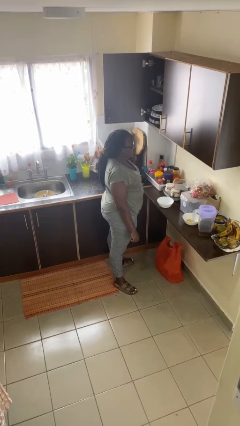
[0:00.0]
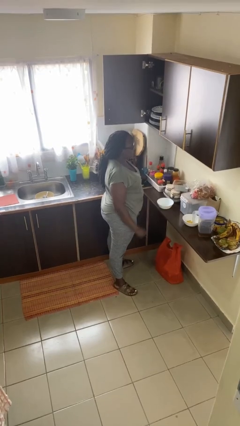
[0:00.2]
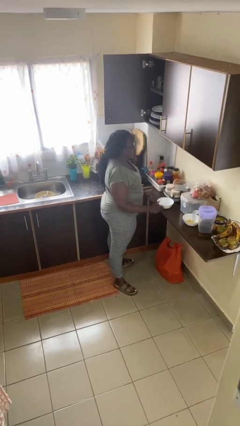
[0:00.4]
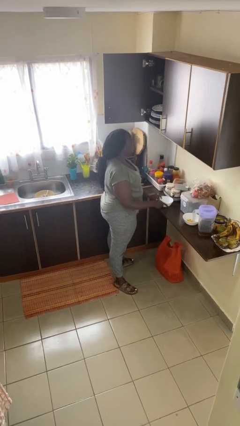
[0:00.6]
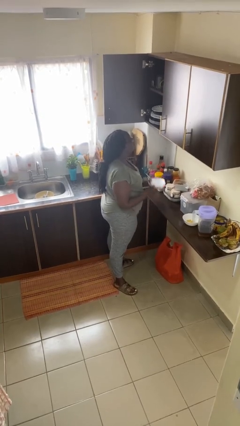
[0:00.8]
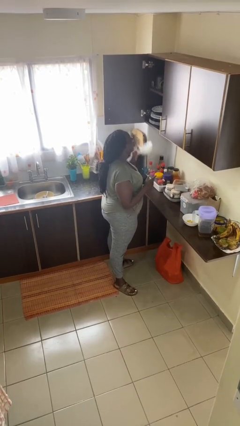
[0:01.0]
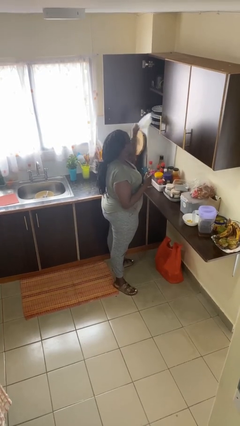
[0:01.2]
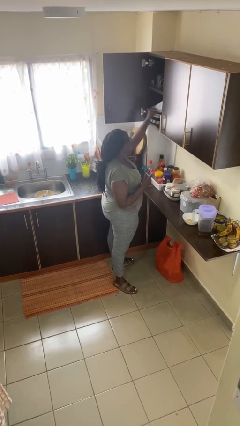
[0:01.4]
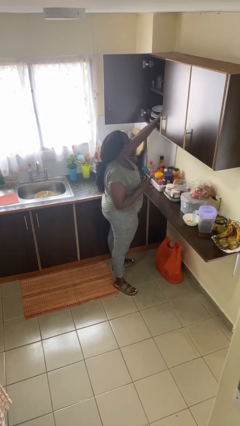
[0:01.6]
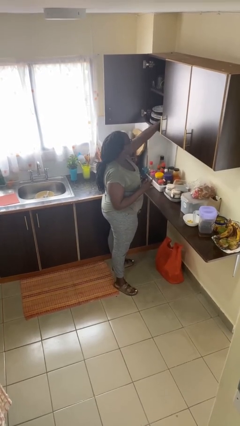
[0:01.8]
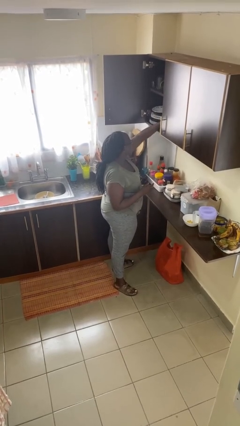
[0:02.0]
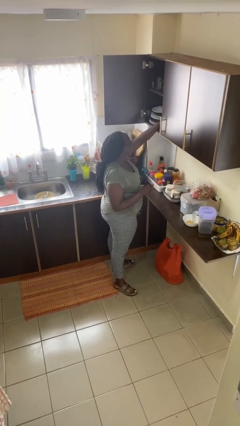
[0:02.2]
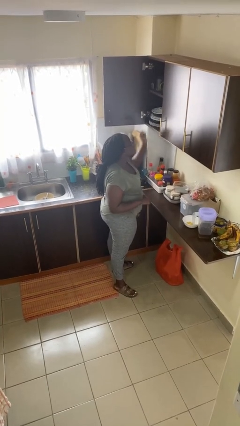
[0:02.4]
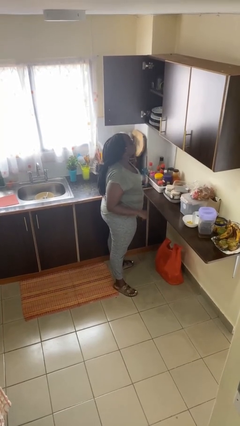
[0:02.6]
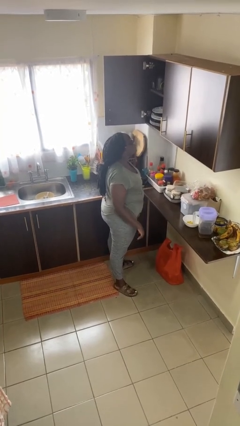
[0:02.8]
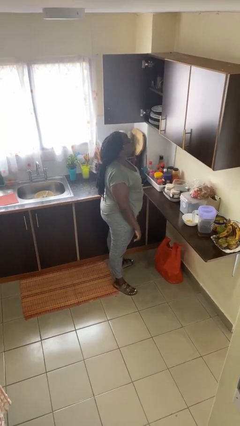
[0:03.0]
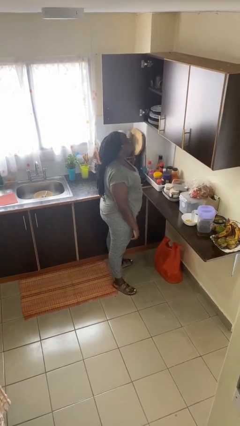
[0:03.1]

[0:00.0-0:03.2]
person puts object in cabinet

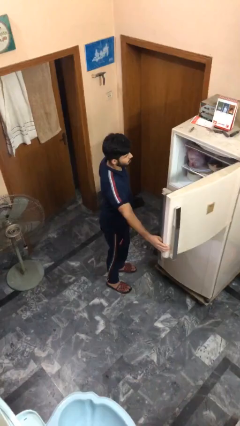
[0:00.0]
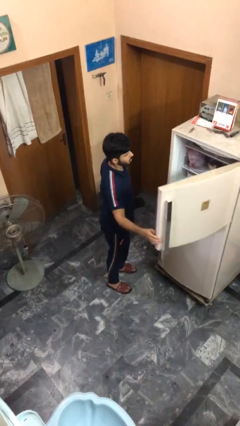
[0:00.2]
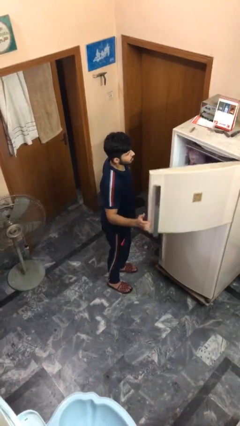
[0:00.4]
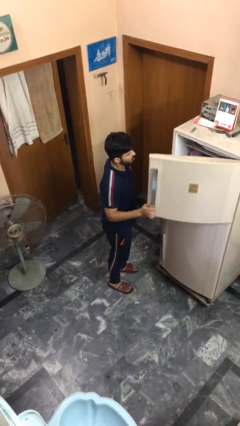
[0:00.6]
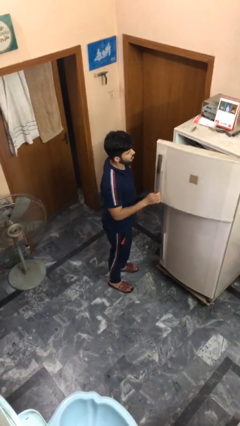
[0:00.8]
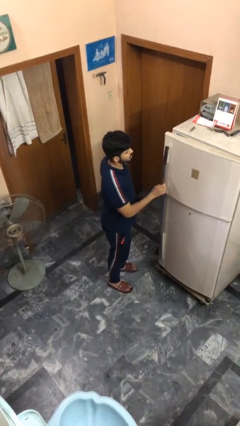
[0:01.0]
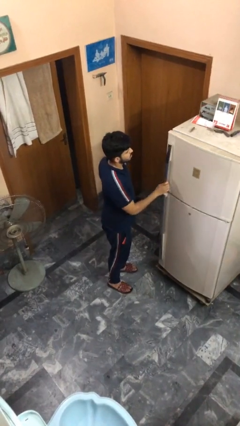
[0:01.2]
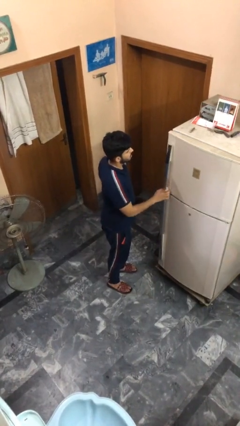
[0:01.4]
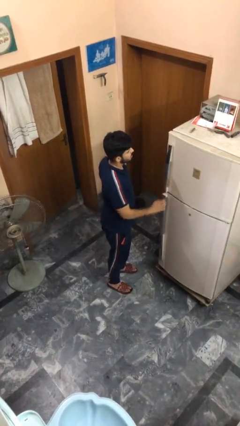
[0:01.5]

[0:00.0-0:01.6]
person closes refrigerator

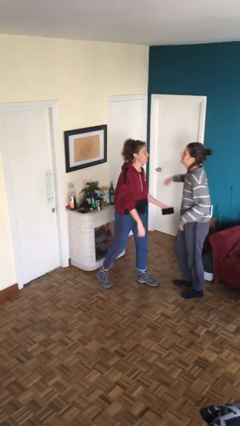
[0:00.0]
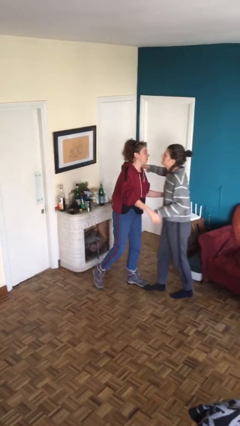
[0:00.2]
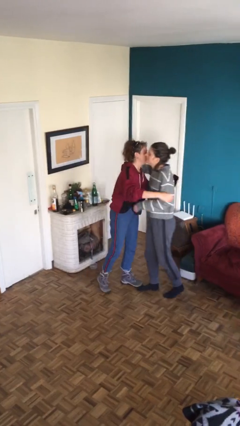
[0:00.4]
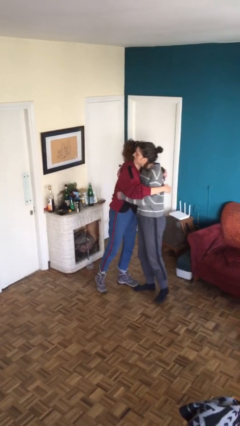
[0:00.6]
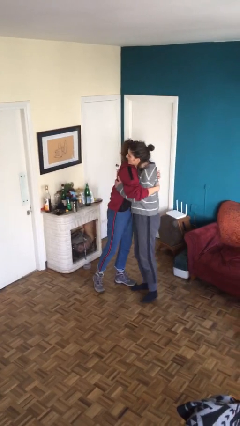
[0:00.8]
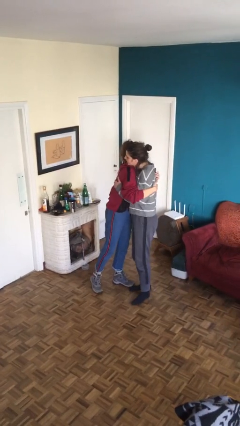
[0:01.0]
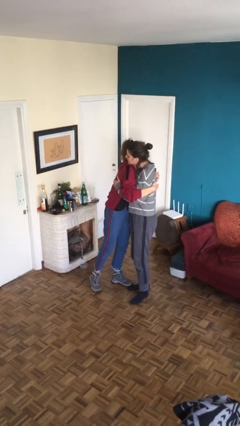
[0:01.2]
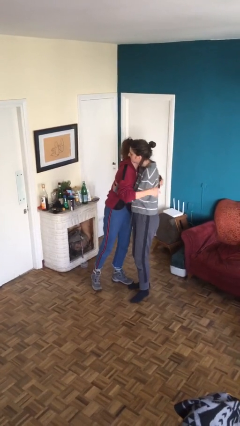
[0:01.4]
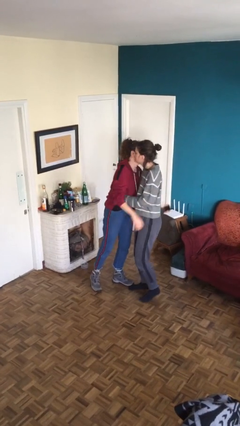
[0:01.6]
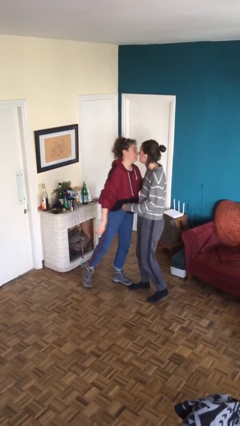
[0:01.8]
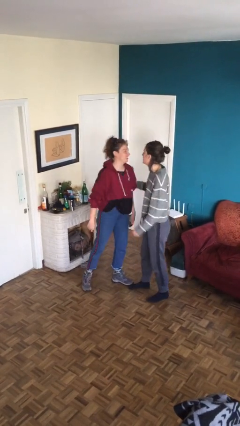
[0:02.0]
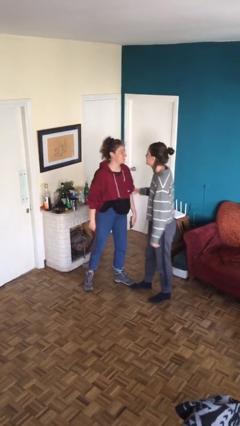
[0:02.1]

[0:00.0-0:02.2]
person embraces person

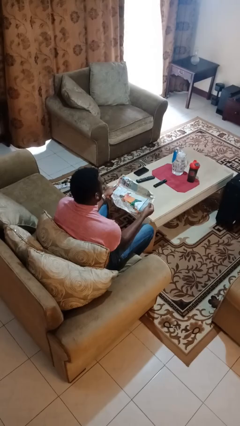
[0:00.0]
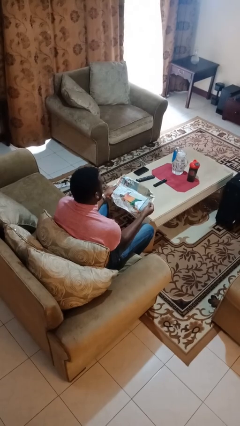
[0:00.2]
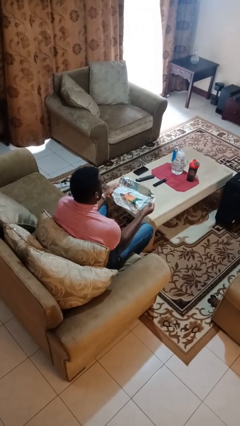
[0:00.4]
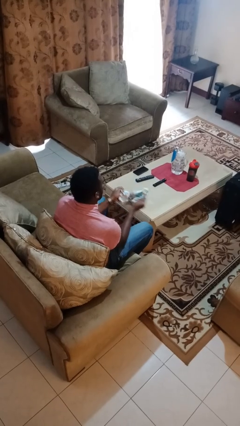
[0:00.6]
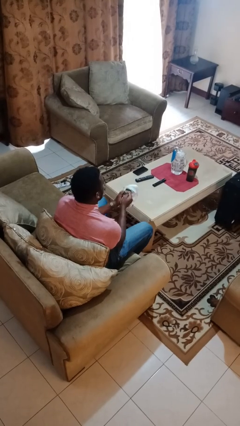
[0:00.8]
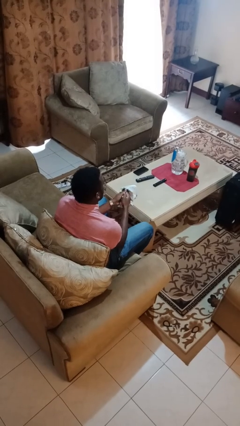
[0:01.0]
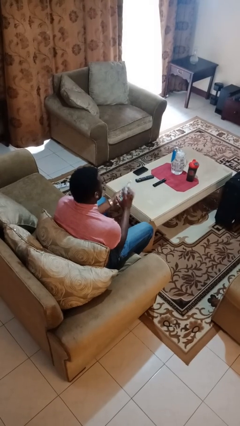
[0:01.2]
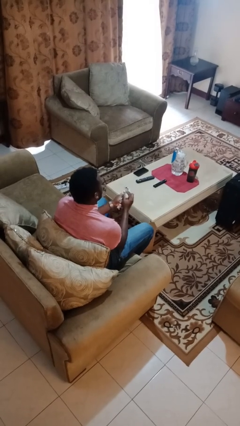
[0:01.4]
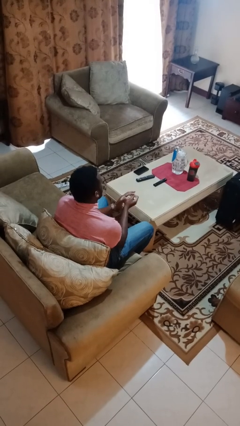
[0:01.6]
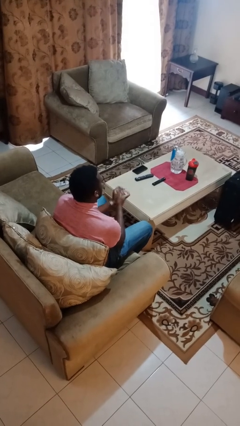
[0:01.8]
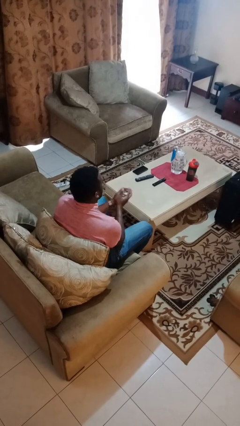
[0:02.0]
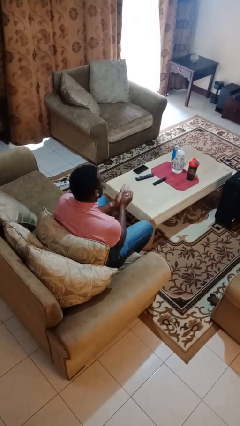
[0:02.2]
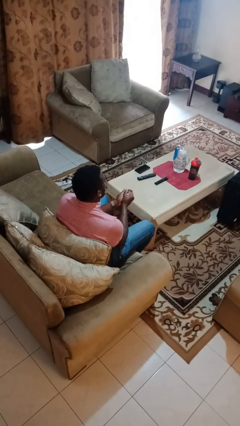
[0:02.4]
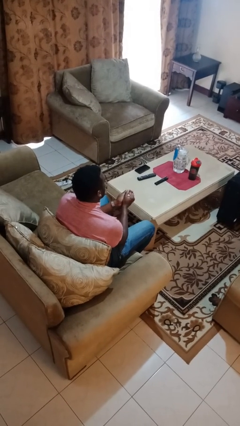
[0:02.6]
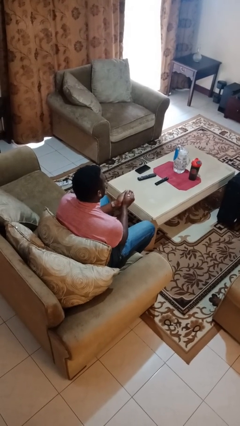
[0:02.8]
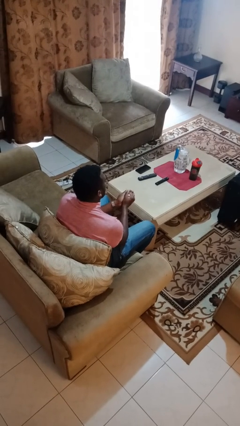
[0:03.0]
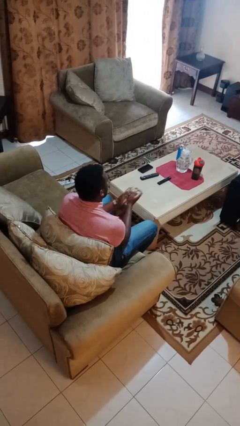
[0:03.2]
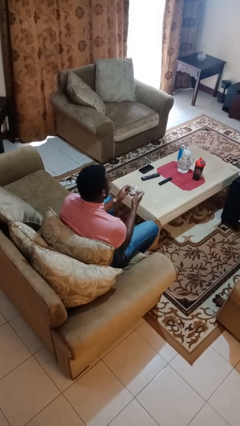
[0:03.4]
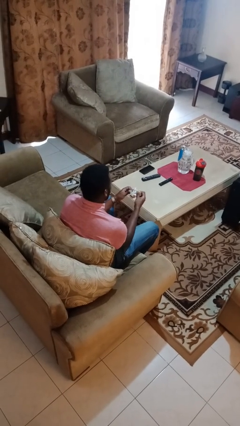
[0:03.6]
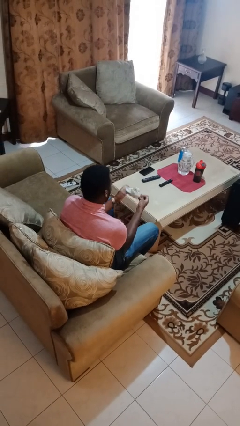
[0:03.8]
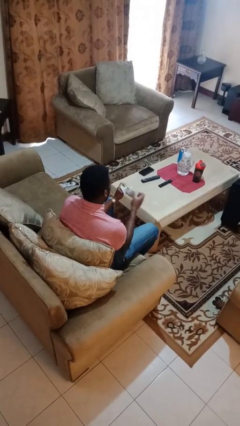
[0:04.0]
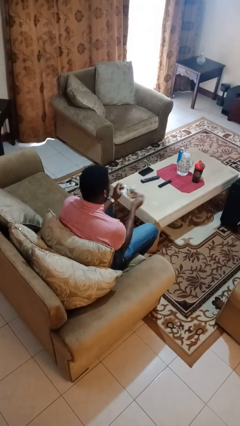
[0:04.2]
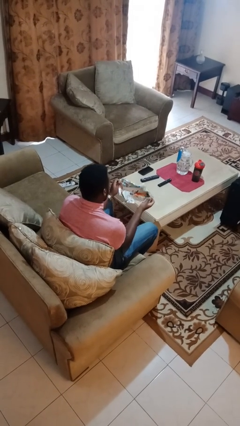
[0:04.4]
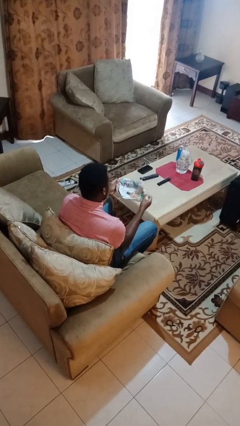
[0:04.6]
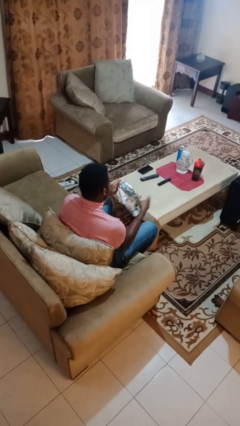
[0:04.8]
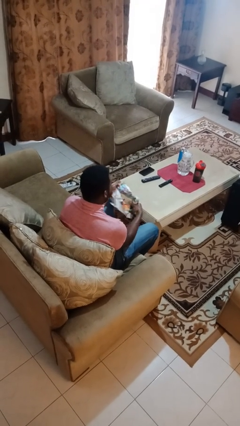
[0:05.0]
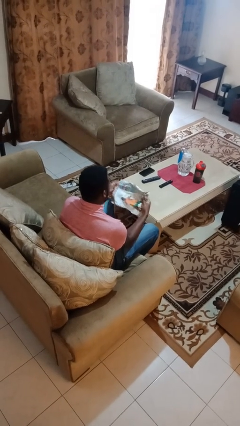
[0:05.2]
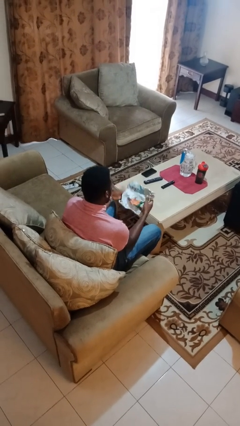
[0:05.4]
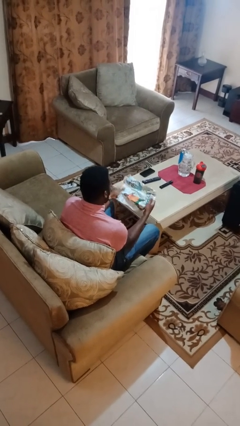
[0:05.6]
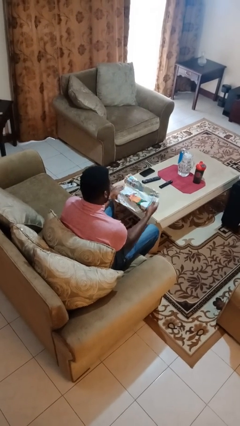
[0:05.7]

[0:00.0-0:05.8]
person crumples paper

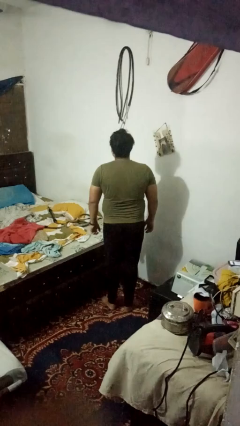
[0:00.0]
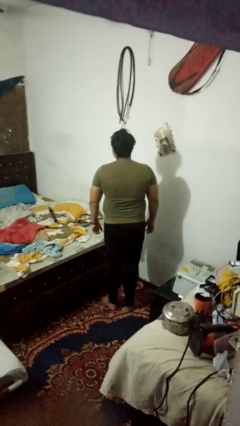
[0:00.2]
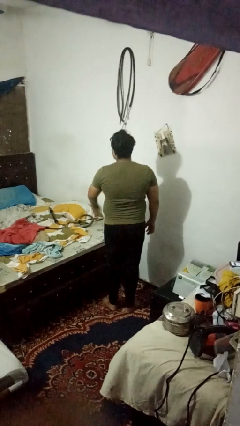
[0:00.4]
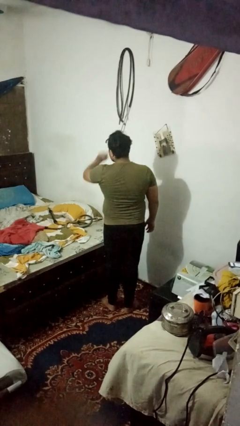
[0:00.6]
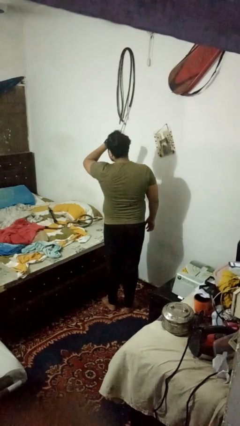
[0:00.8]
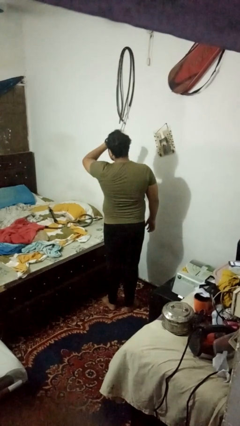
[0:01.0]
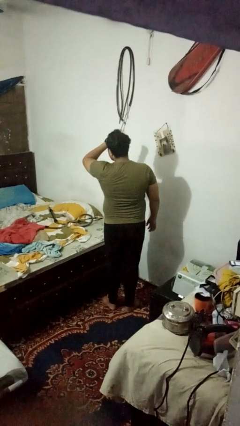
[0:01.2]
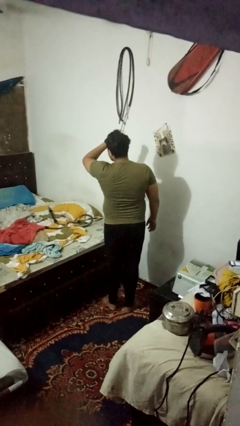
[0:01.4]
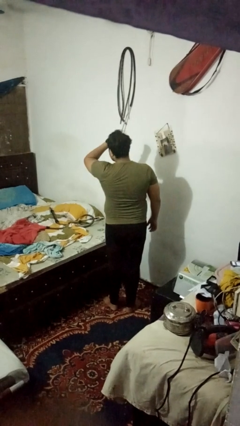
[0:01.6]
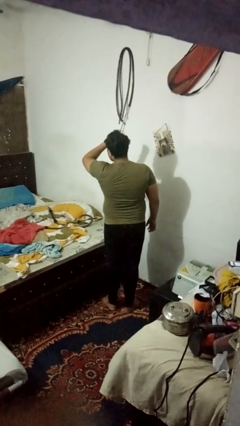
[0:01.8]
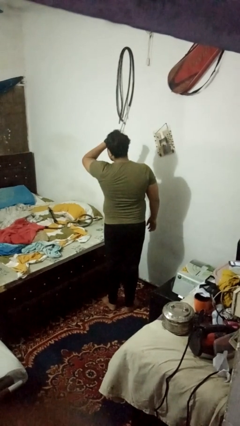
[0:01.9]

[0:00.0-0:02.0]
person gestures watch closely

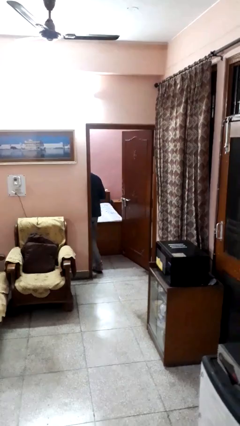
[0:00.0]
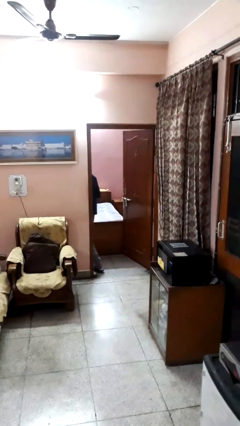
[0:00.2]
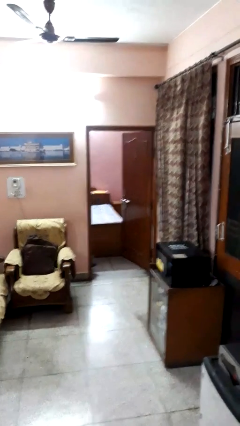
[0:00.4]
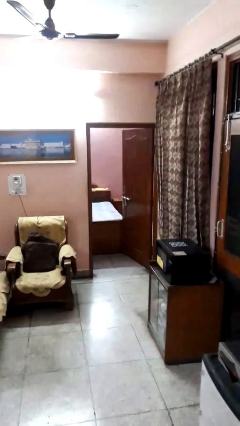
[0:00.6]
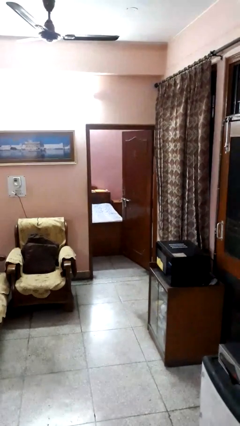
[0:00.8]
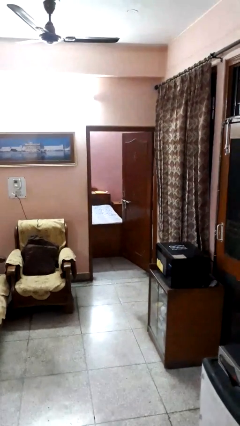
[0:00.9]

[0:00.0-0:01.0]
person exits scene through structure

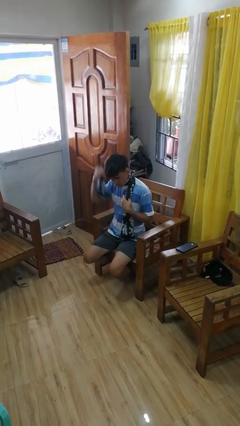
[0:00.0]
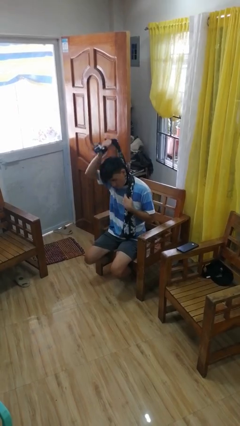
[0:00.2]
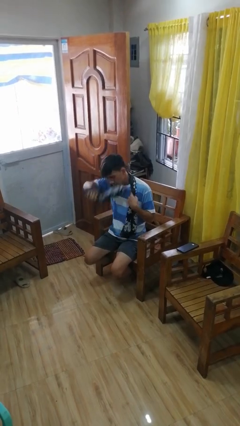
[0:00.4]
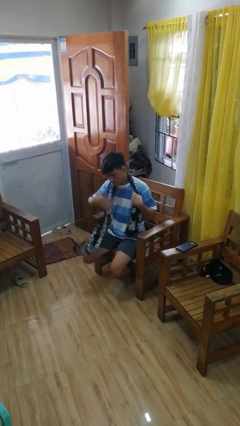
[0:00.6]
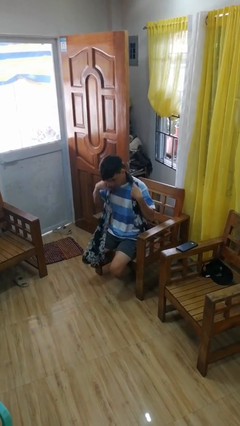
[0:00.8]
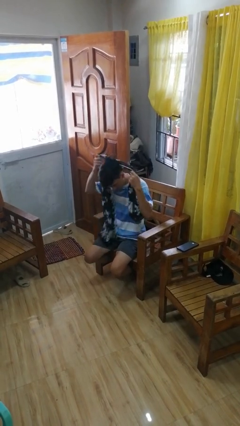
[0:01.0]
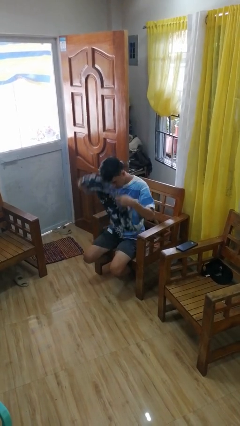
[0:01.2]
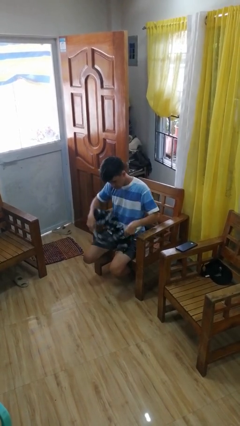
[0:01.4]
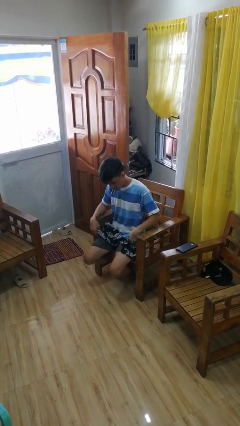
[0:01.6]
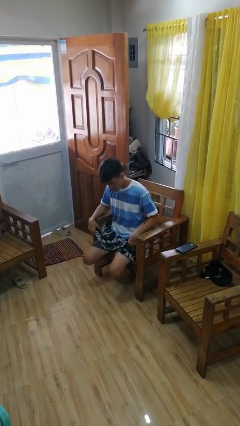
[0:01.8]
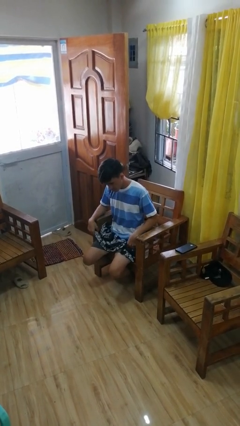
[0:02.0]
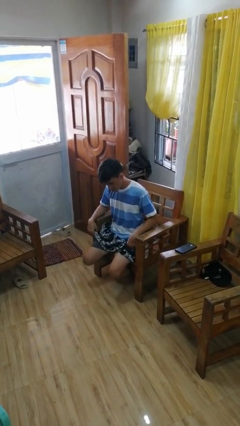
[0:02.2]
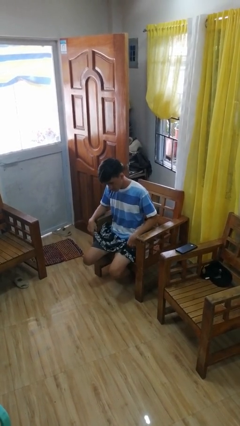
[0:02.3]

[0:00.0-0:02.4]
person takes off scarf
